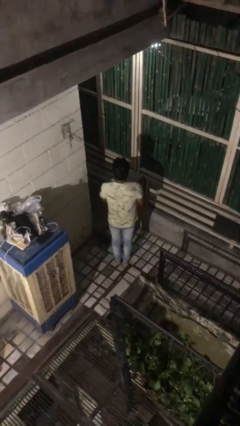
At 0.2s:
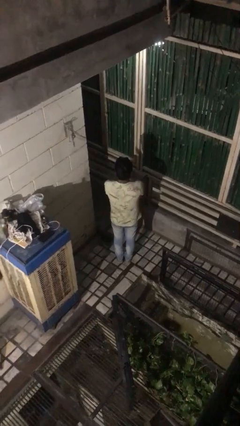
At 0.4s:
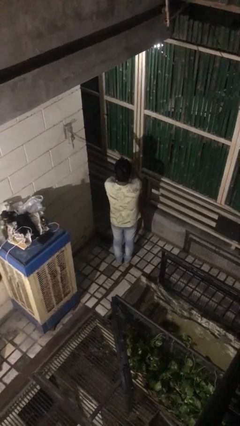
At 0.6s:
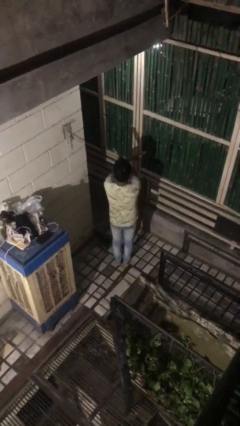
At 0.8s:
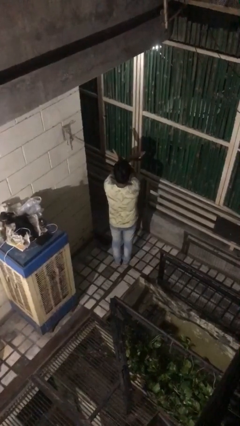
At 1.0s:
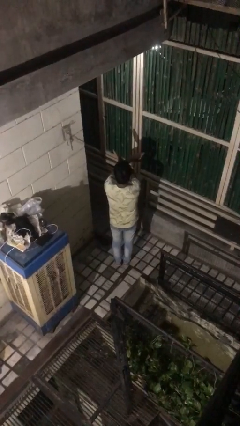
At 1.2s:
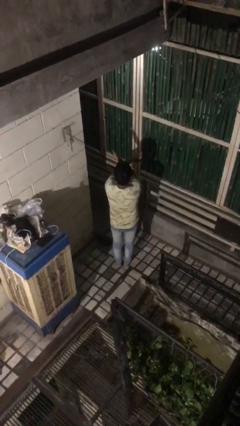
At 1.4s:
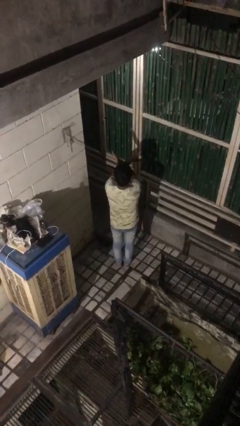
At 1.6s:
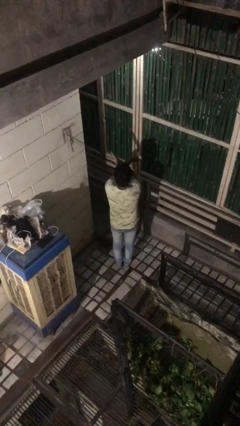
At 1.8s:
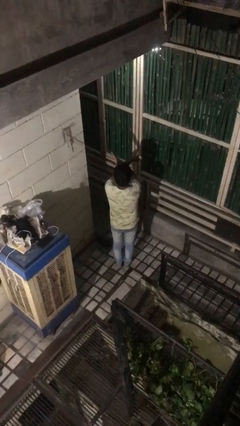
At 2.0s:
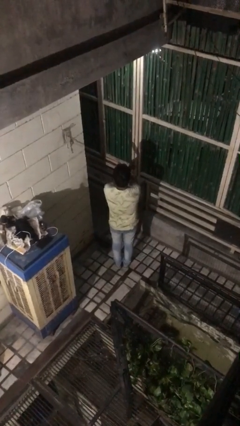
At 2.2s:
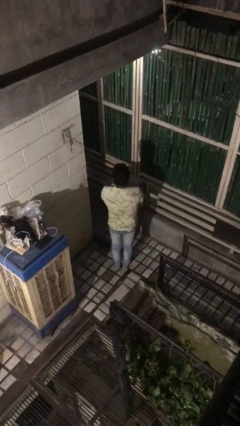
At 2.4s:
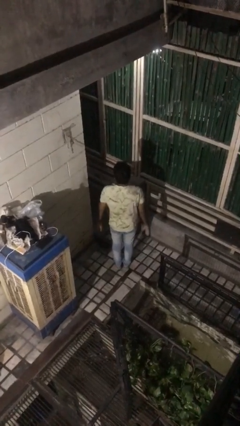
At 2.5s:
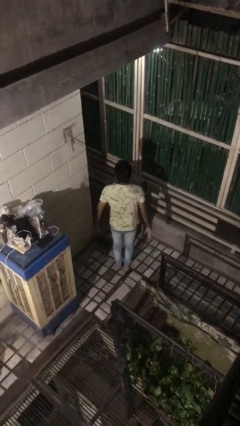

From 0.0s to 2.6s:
person gestures arms x

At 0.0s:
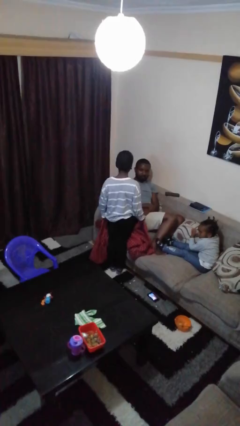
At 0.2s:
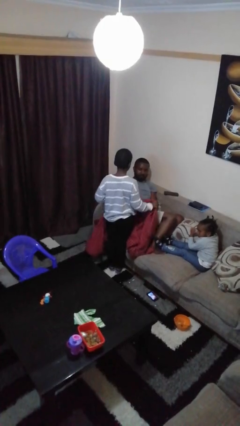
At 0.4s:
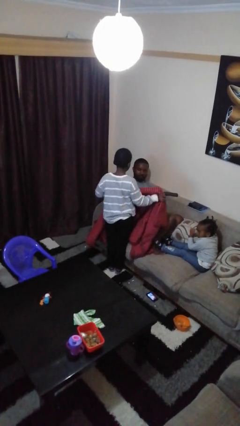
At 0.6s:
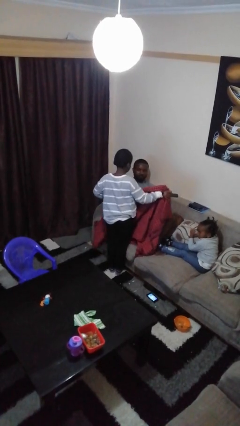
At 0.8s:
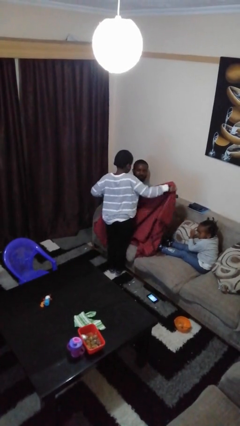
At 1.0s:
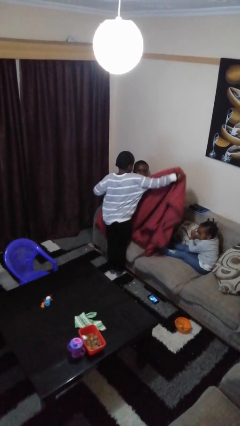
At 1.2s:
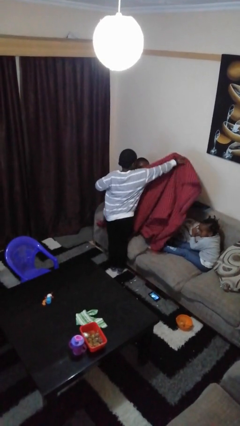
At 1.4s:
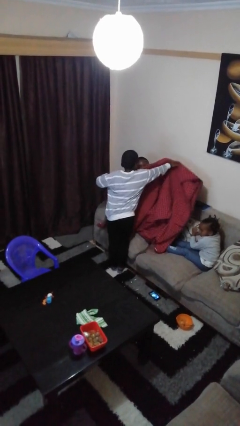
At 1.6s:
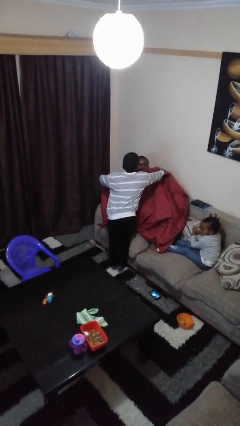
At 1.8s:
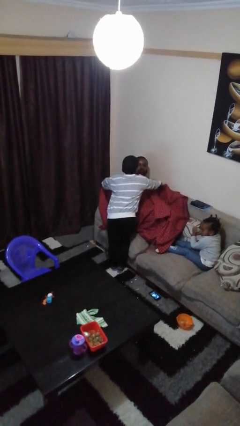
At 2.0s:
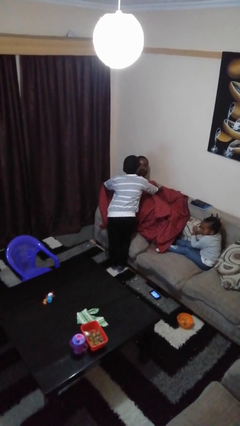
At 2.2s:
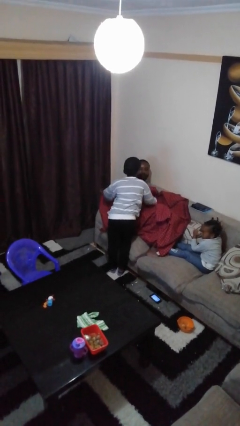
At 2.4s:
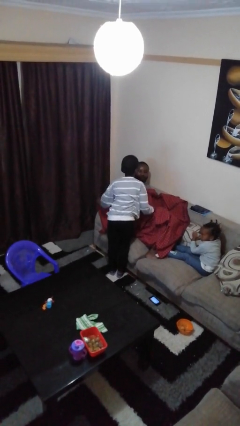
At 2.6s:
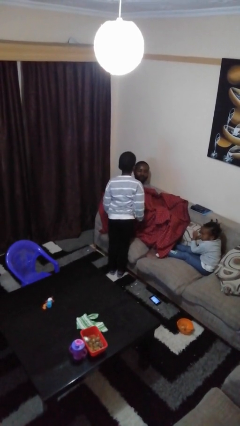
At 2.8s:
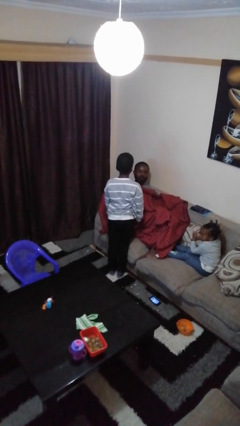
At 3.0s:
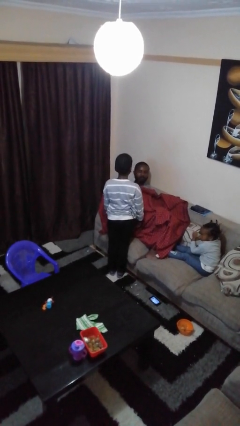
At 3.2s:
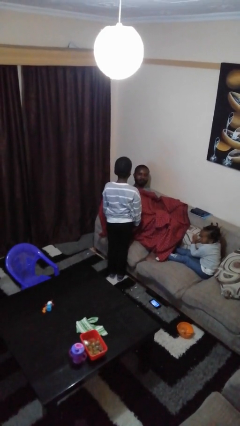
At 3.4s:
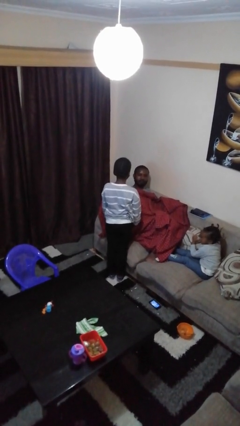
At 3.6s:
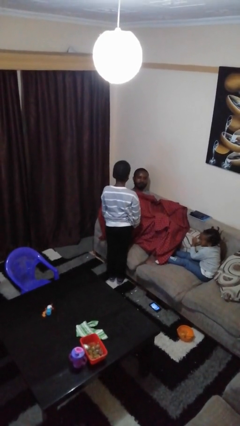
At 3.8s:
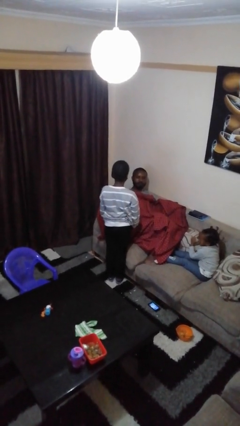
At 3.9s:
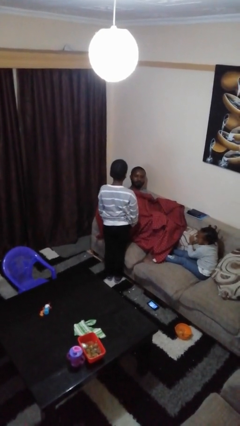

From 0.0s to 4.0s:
person covers friend with blanket

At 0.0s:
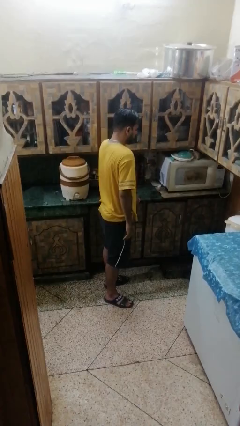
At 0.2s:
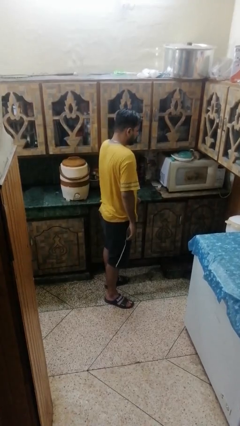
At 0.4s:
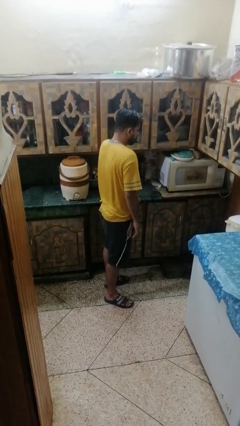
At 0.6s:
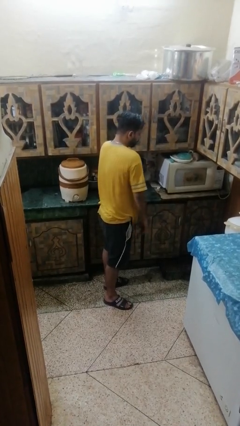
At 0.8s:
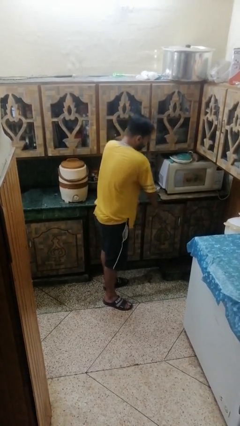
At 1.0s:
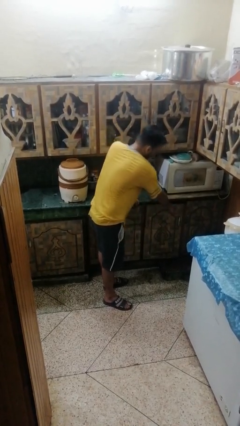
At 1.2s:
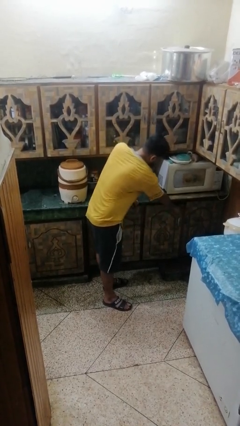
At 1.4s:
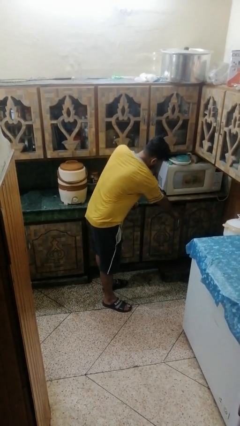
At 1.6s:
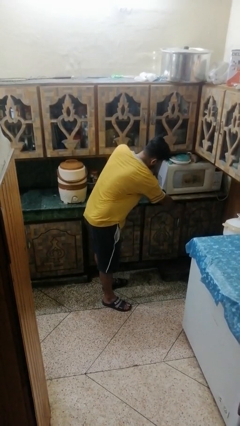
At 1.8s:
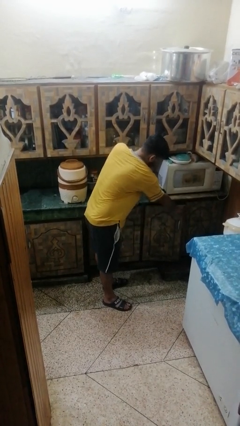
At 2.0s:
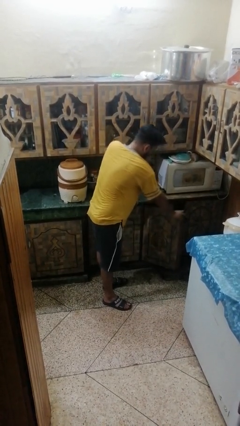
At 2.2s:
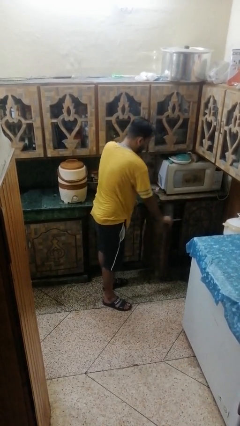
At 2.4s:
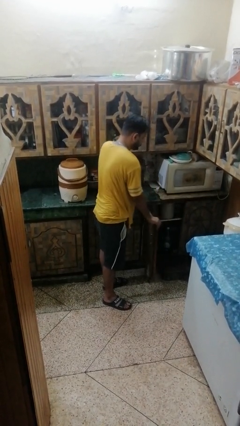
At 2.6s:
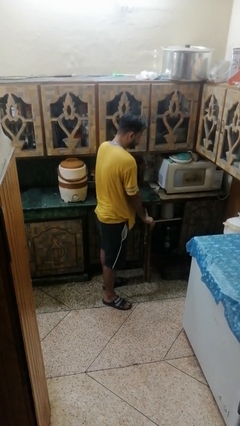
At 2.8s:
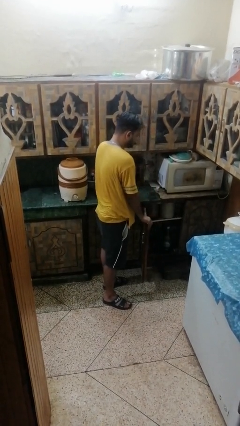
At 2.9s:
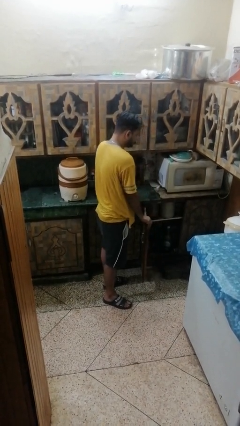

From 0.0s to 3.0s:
person closes cabinet

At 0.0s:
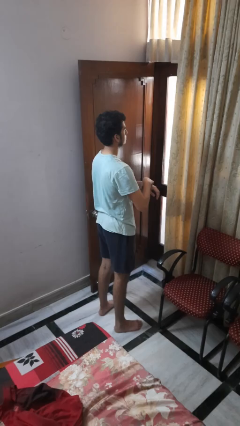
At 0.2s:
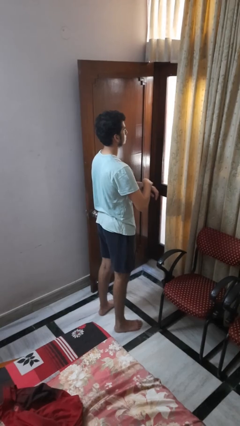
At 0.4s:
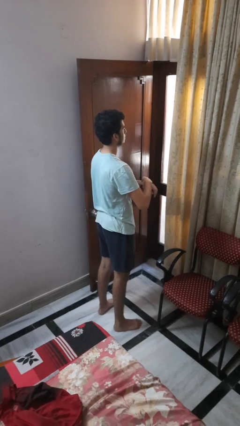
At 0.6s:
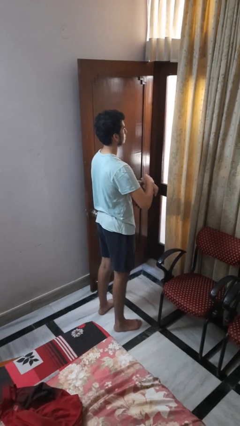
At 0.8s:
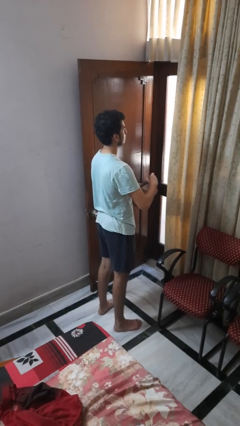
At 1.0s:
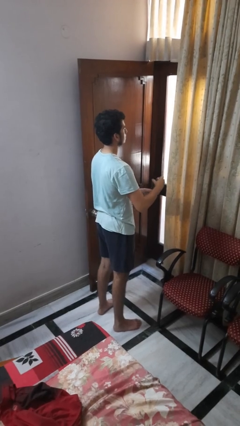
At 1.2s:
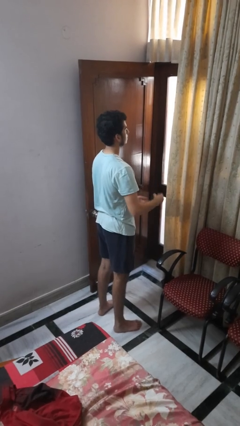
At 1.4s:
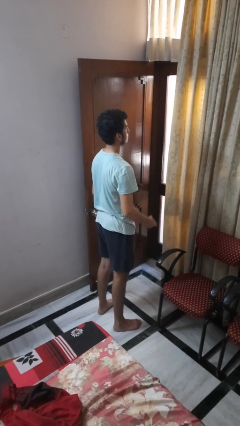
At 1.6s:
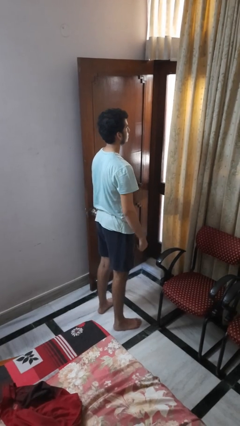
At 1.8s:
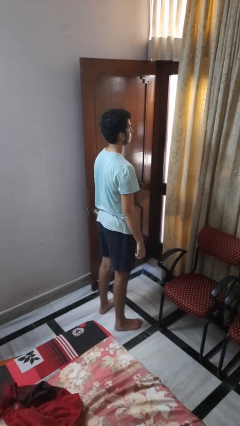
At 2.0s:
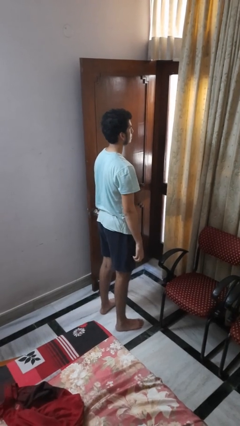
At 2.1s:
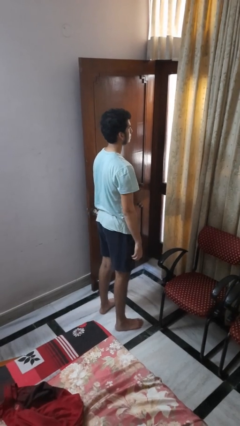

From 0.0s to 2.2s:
person takes off wristwatch

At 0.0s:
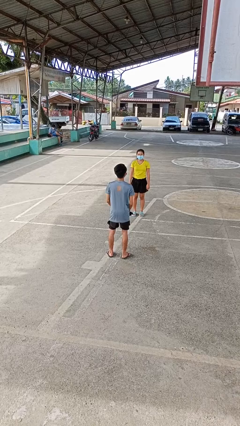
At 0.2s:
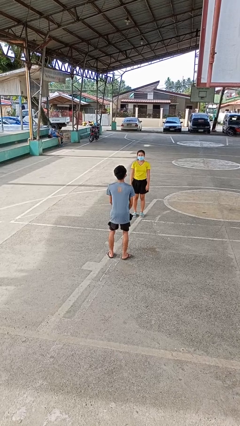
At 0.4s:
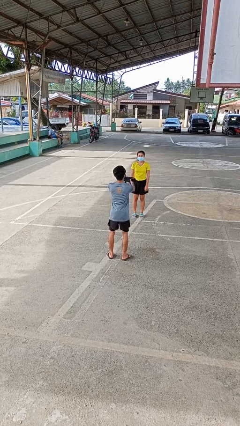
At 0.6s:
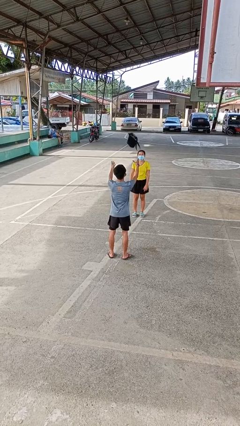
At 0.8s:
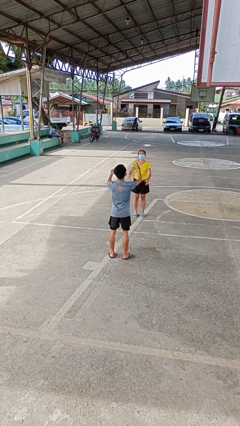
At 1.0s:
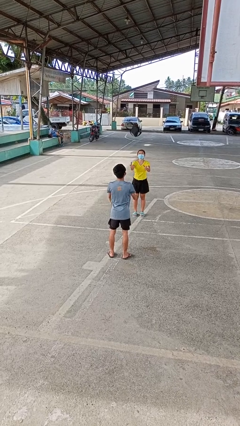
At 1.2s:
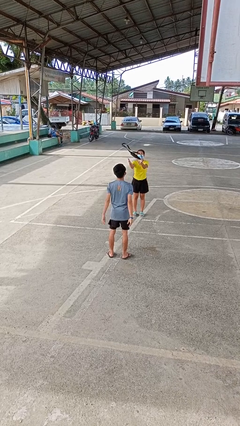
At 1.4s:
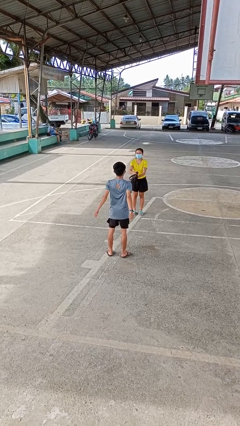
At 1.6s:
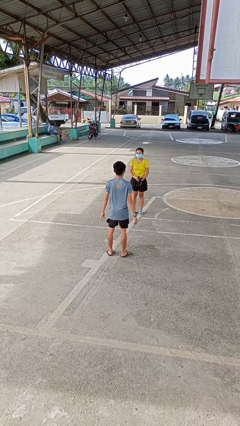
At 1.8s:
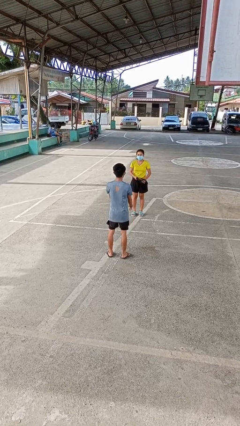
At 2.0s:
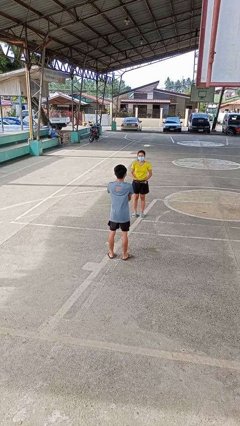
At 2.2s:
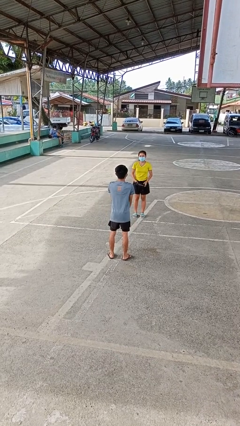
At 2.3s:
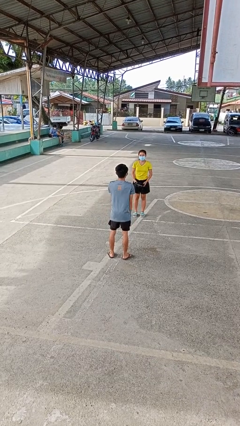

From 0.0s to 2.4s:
person throws object to person

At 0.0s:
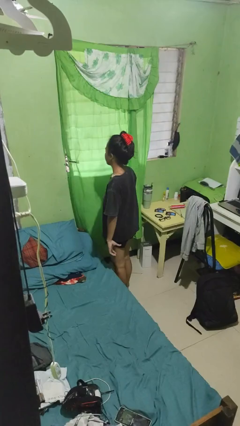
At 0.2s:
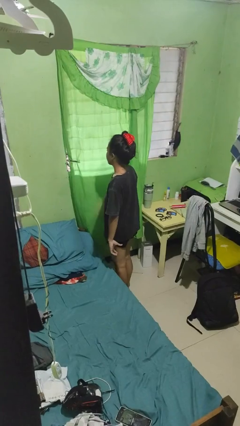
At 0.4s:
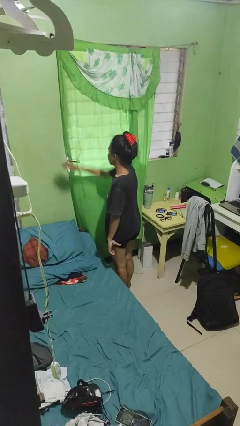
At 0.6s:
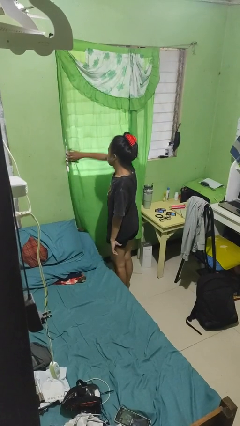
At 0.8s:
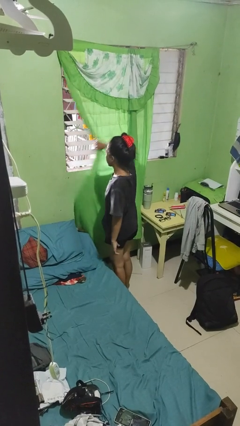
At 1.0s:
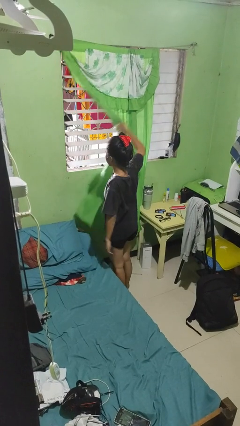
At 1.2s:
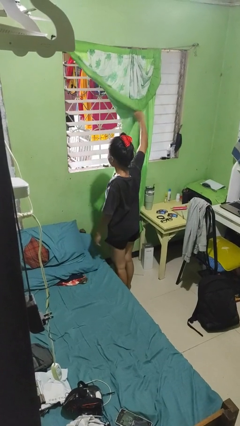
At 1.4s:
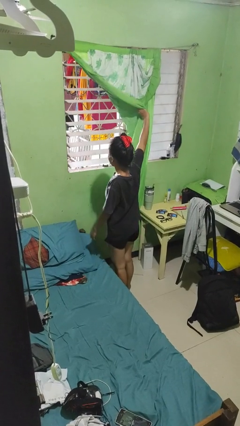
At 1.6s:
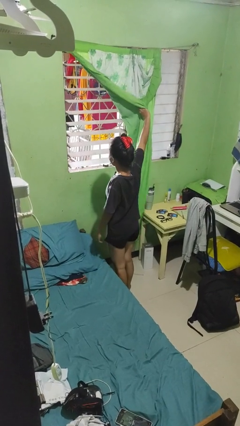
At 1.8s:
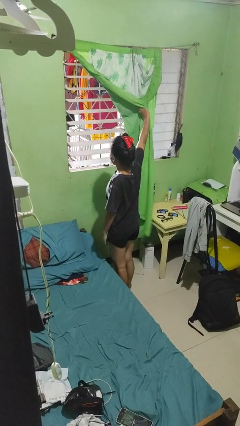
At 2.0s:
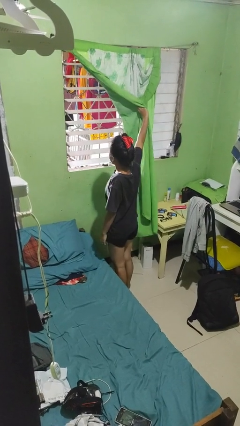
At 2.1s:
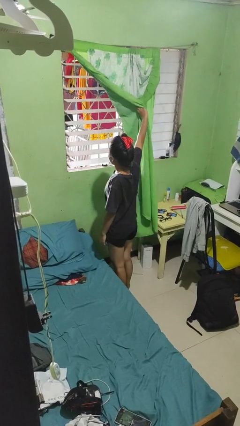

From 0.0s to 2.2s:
person opens curtains

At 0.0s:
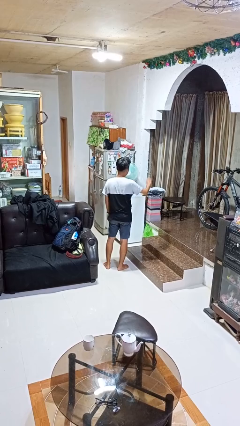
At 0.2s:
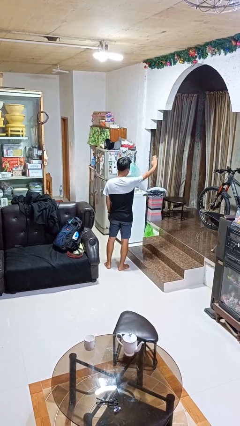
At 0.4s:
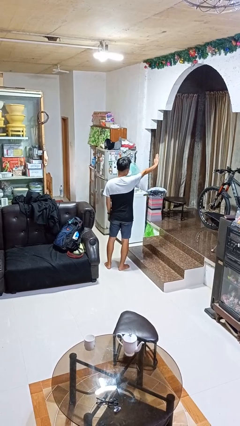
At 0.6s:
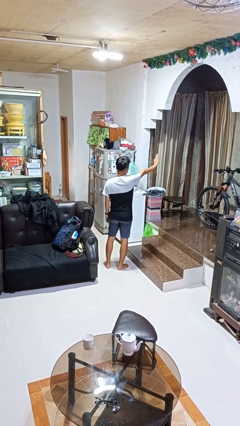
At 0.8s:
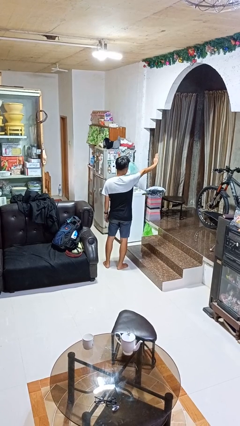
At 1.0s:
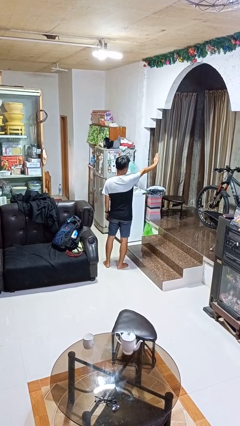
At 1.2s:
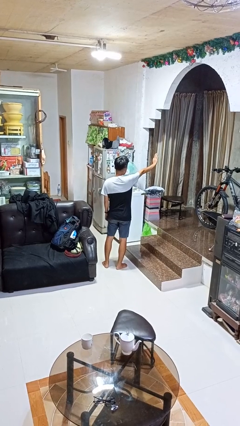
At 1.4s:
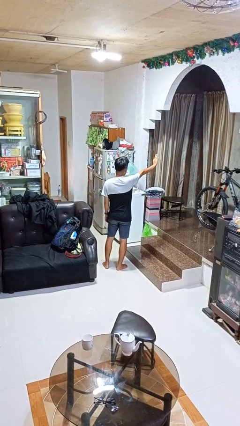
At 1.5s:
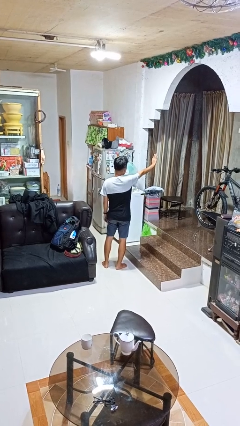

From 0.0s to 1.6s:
person gestures stop
